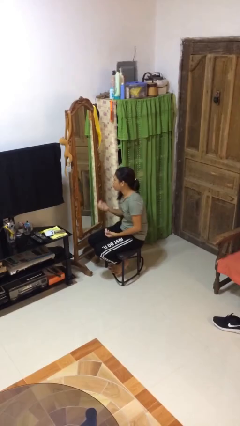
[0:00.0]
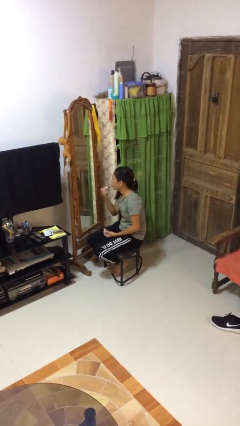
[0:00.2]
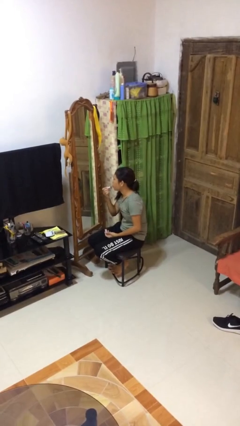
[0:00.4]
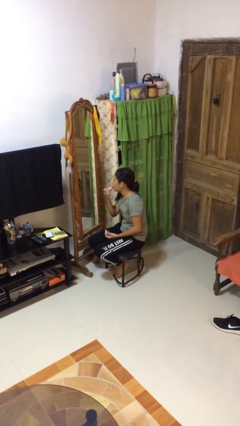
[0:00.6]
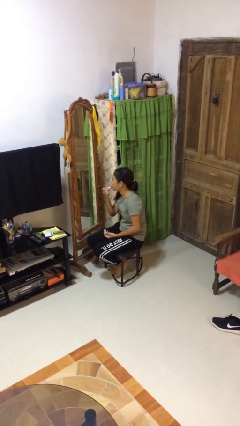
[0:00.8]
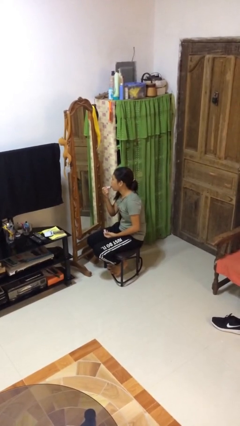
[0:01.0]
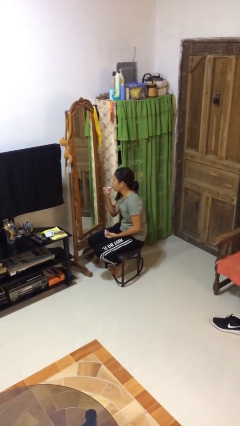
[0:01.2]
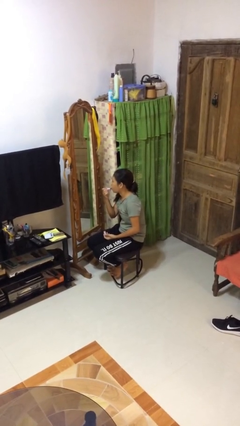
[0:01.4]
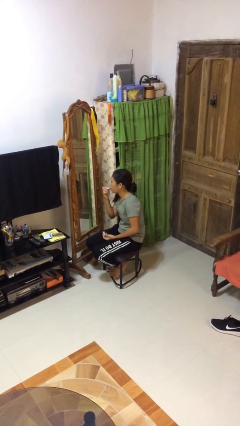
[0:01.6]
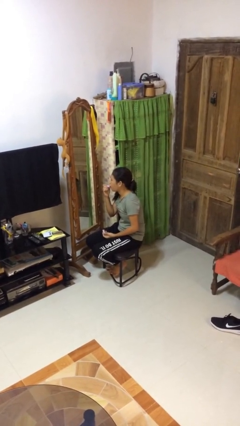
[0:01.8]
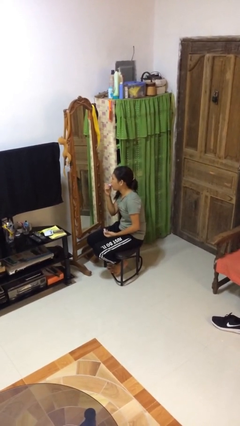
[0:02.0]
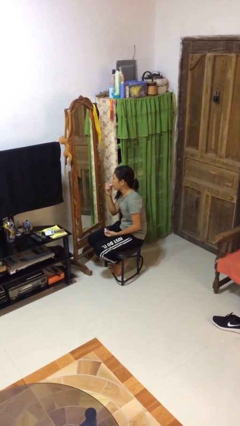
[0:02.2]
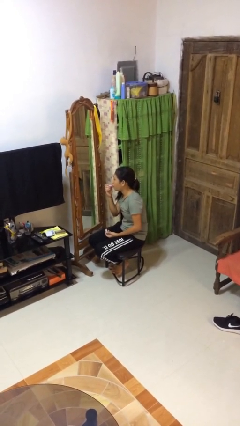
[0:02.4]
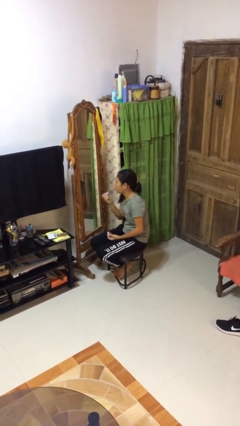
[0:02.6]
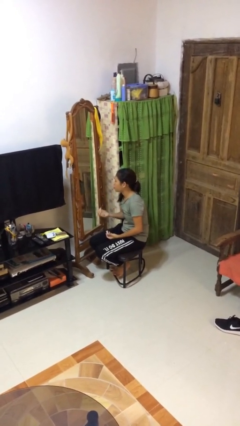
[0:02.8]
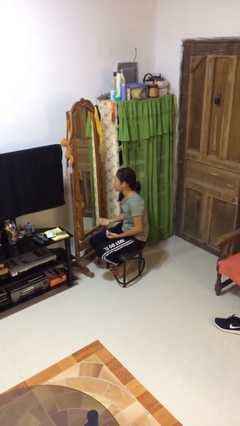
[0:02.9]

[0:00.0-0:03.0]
person applies lip makeup

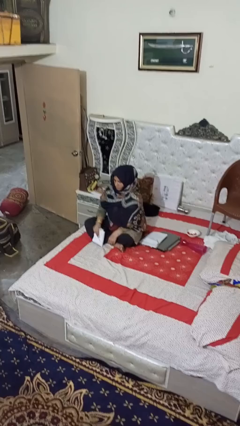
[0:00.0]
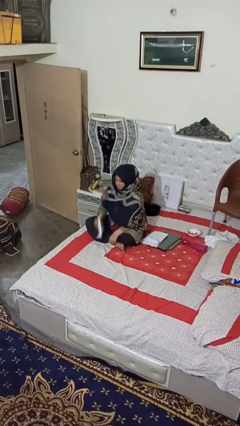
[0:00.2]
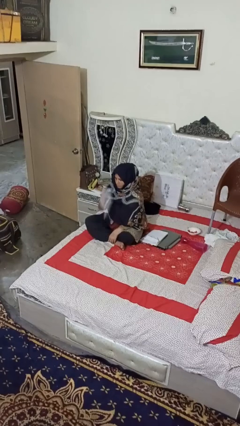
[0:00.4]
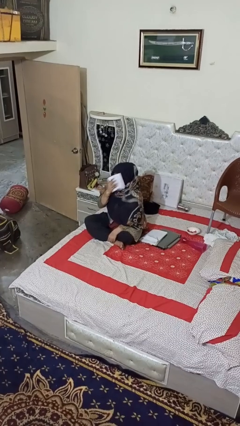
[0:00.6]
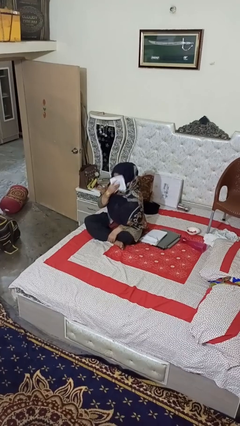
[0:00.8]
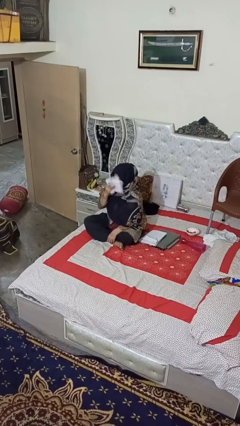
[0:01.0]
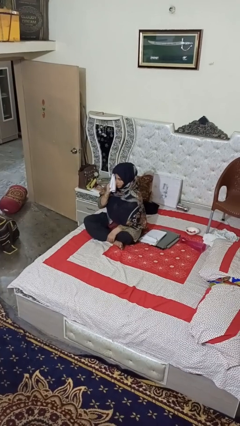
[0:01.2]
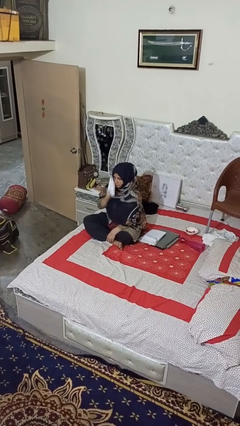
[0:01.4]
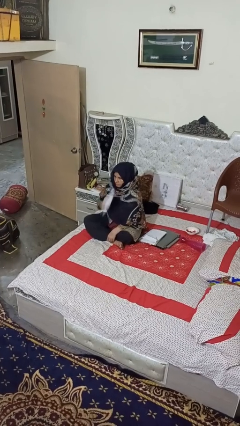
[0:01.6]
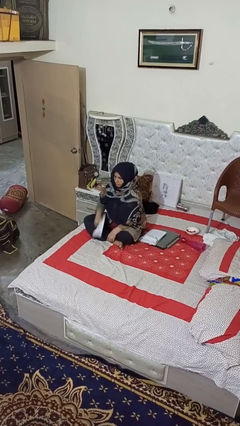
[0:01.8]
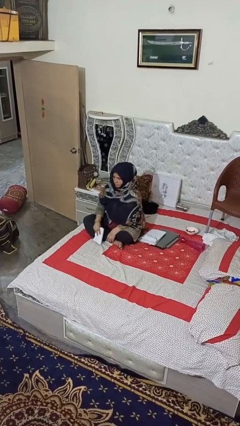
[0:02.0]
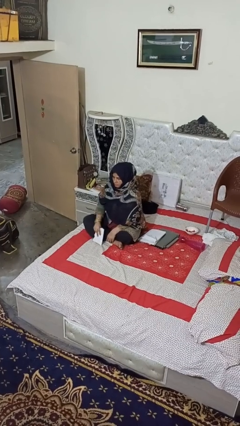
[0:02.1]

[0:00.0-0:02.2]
person wipes mouth with napkin

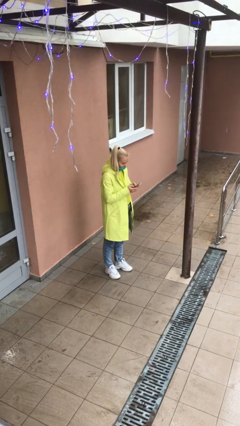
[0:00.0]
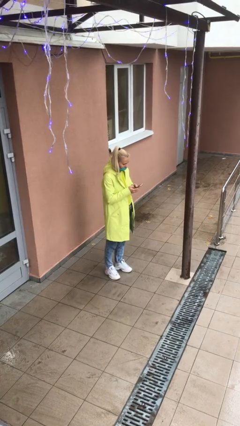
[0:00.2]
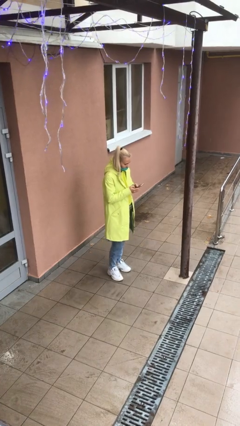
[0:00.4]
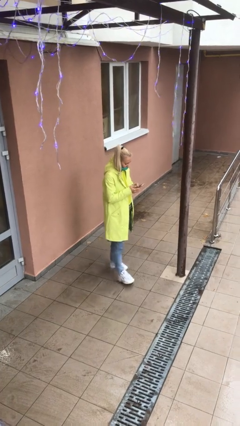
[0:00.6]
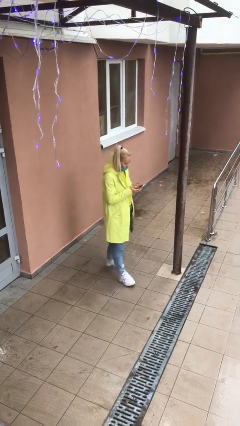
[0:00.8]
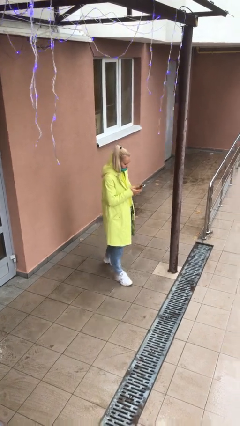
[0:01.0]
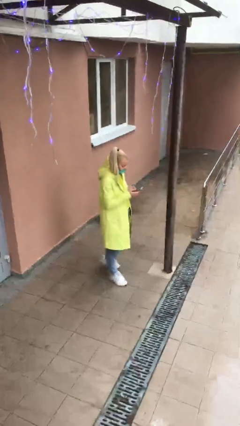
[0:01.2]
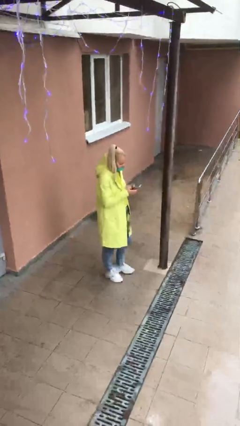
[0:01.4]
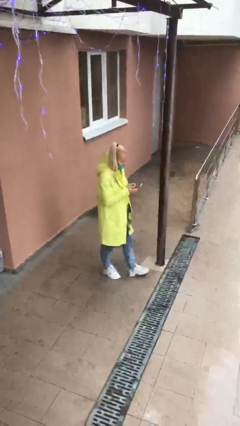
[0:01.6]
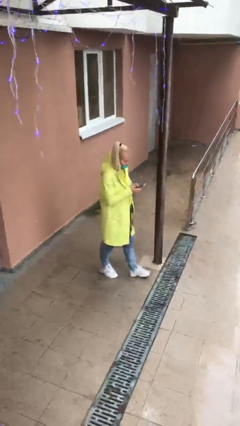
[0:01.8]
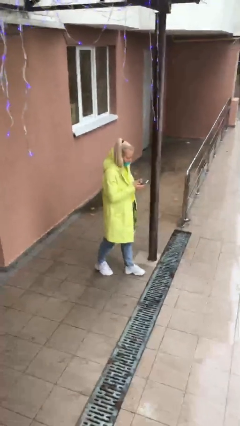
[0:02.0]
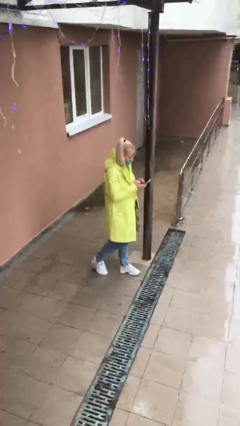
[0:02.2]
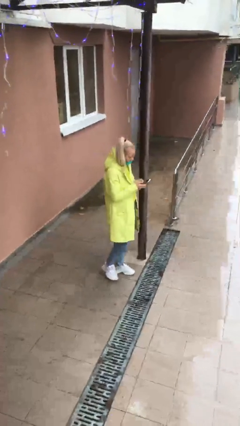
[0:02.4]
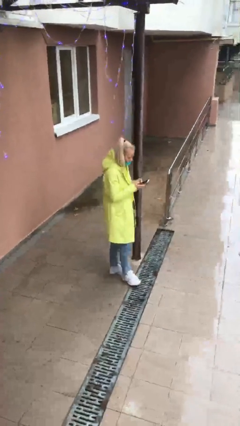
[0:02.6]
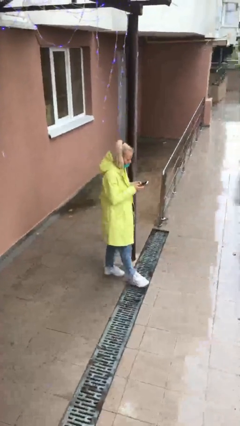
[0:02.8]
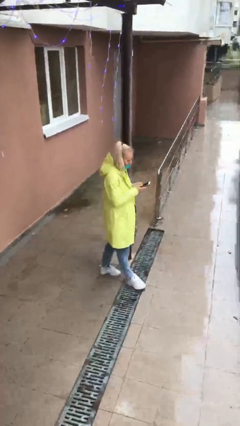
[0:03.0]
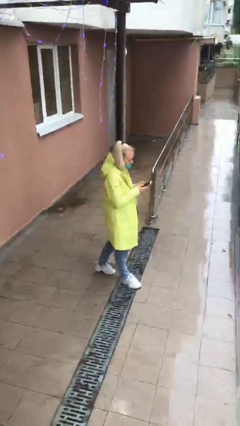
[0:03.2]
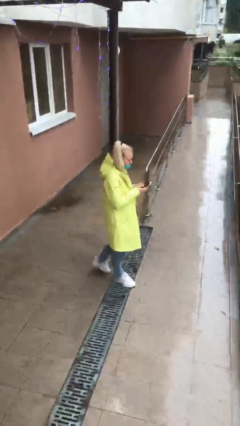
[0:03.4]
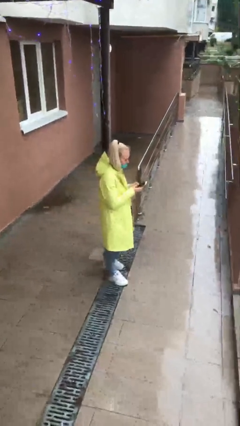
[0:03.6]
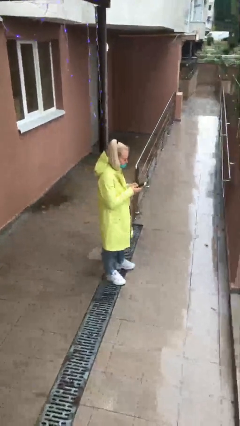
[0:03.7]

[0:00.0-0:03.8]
person texts on phone

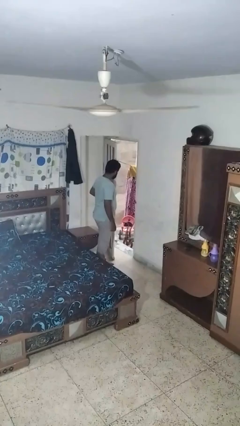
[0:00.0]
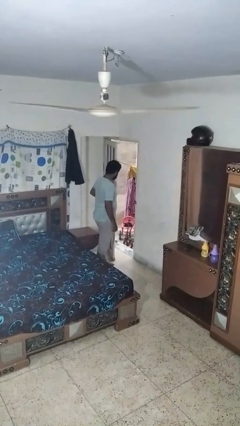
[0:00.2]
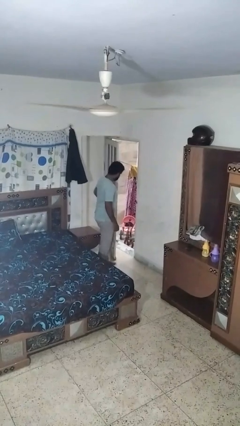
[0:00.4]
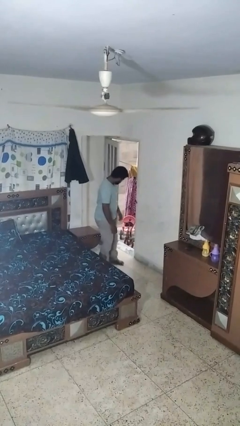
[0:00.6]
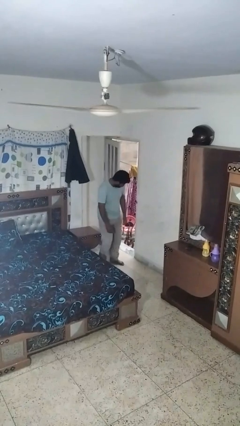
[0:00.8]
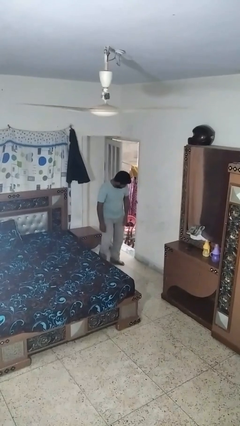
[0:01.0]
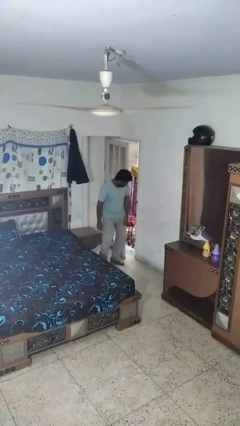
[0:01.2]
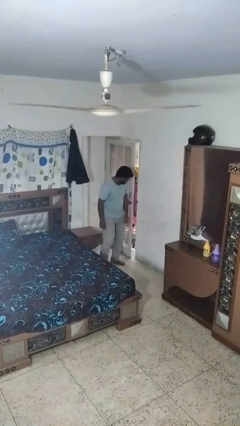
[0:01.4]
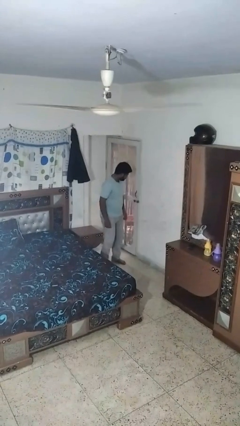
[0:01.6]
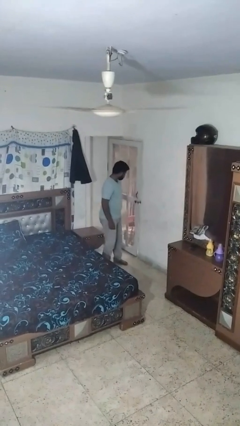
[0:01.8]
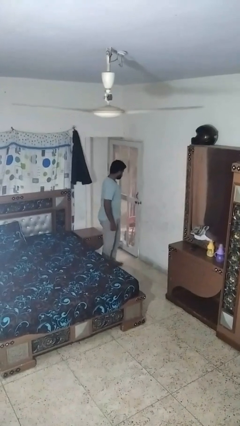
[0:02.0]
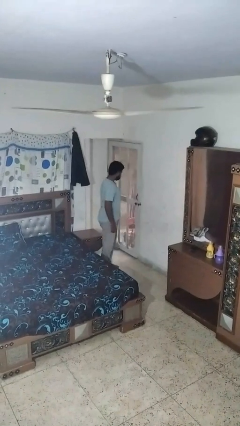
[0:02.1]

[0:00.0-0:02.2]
person closes door with hip

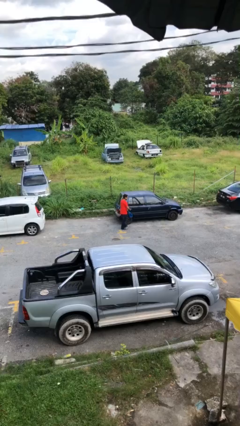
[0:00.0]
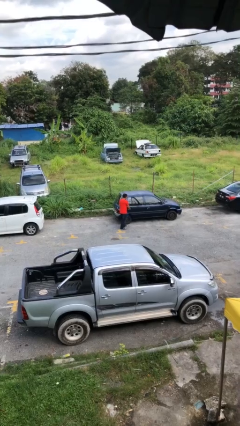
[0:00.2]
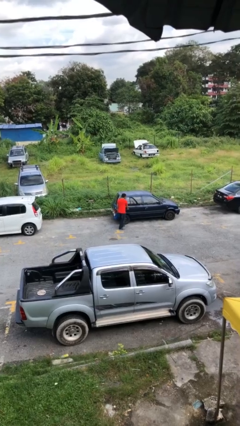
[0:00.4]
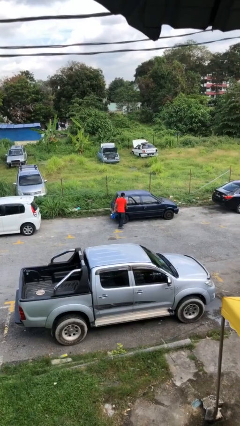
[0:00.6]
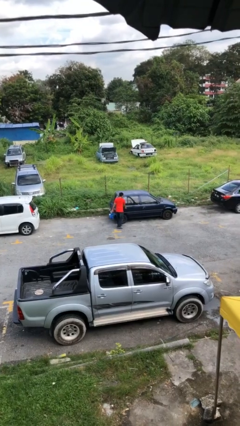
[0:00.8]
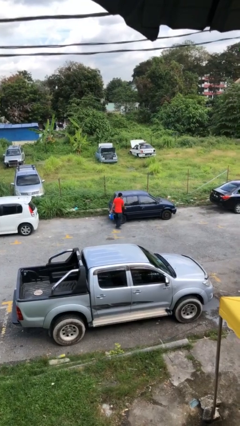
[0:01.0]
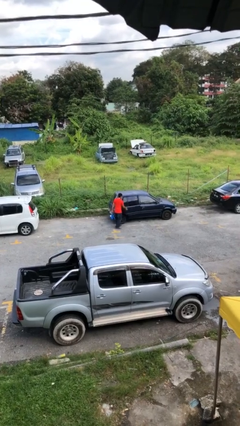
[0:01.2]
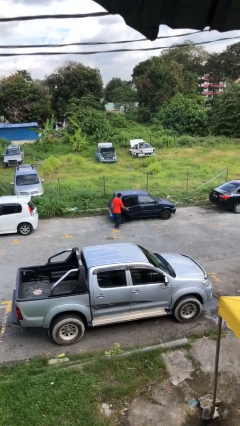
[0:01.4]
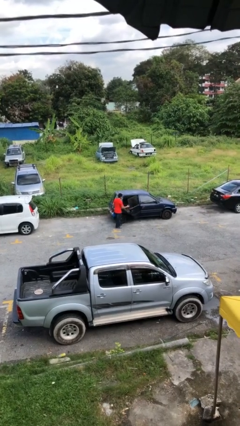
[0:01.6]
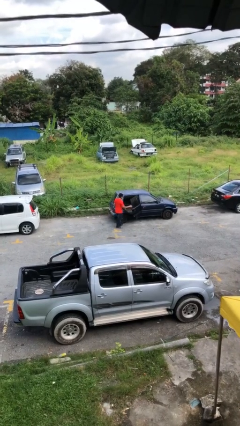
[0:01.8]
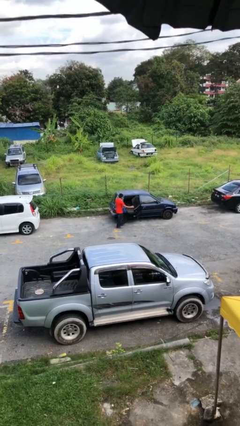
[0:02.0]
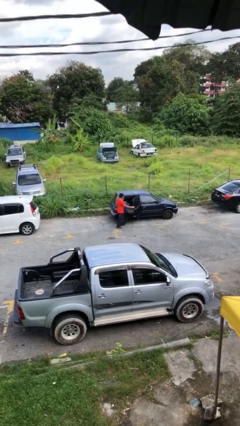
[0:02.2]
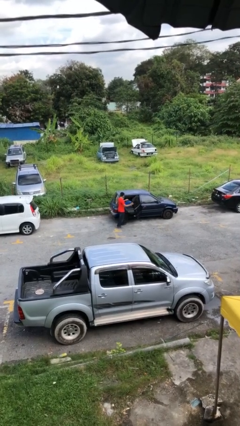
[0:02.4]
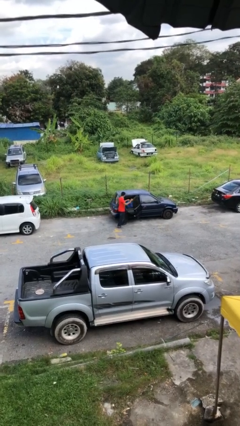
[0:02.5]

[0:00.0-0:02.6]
person opens car door

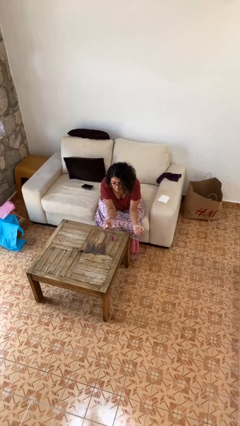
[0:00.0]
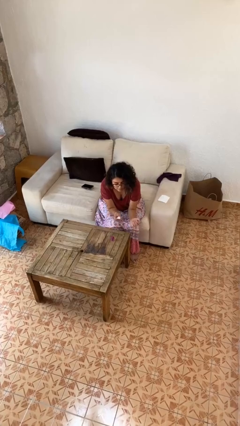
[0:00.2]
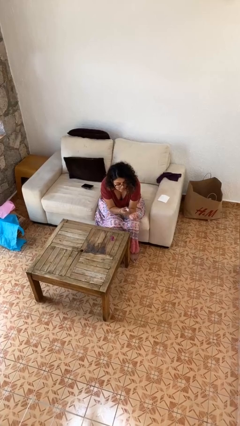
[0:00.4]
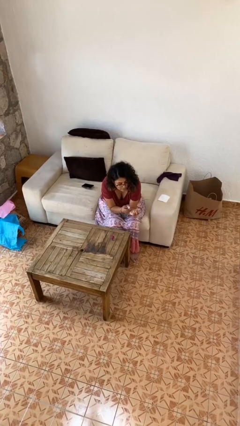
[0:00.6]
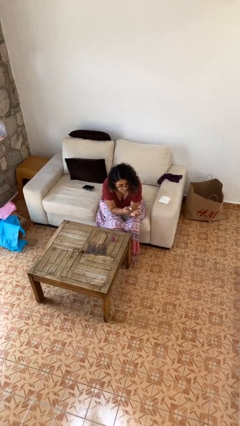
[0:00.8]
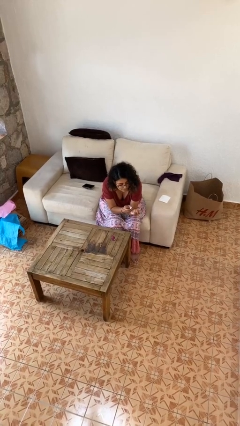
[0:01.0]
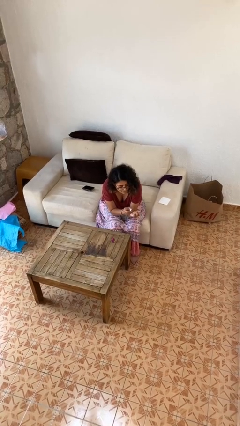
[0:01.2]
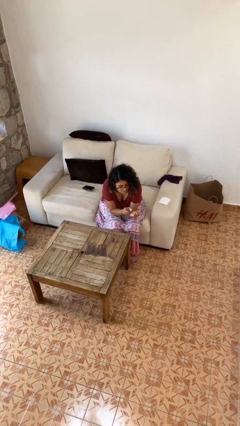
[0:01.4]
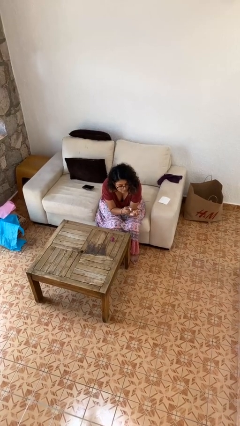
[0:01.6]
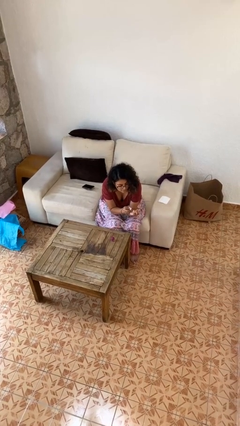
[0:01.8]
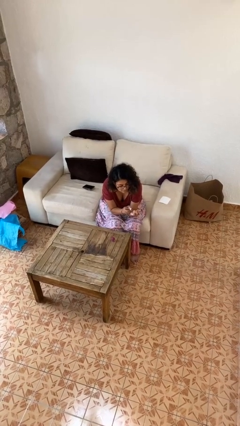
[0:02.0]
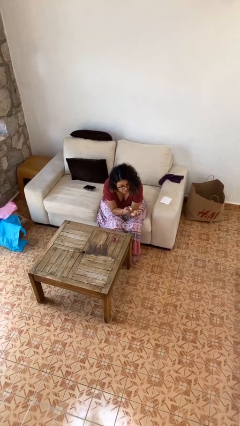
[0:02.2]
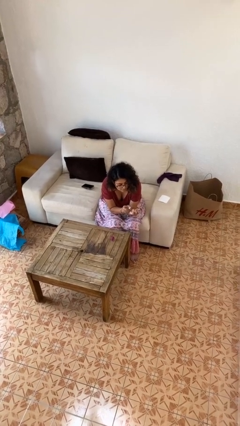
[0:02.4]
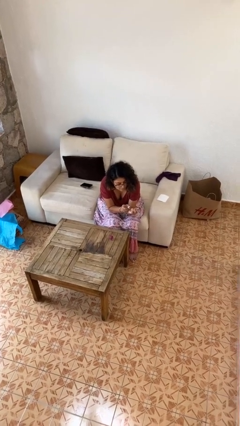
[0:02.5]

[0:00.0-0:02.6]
person paints fingernails

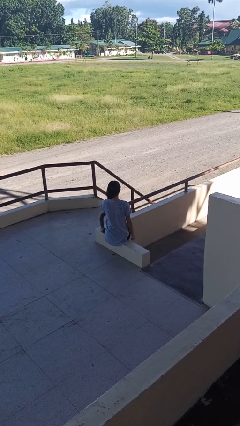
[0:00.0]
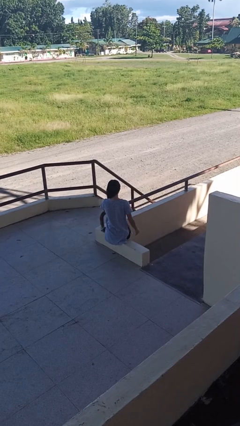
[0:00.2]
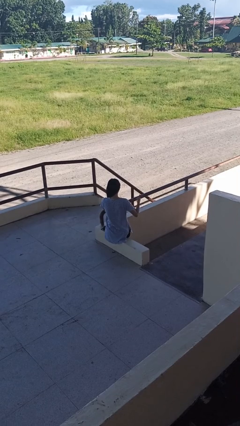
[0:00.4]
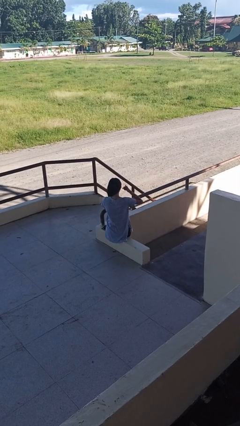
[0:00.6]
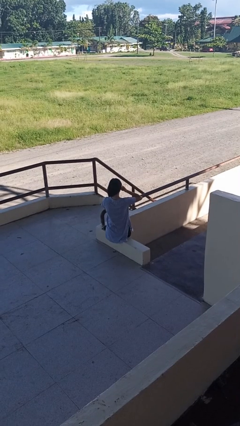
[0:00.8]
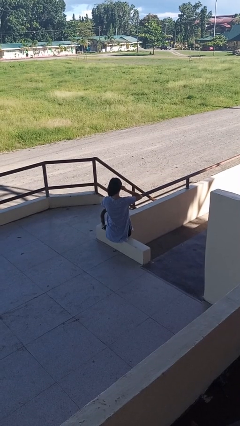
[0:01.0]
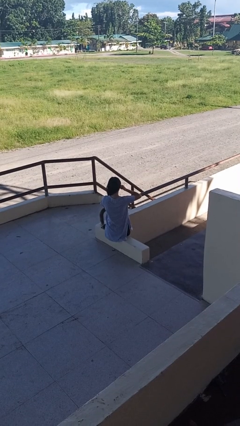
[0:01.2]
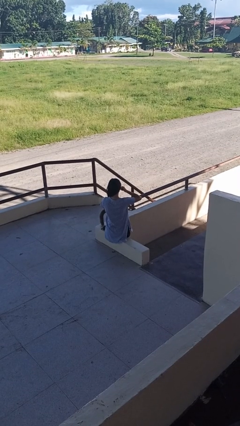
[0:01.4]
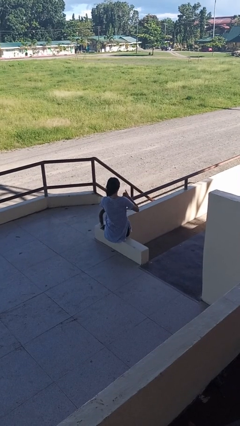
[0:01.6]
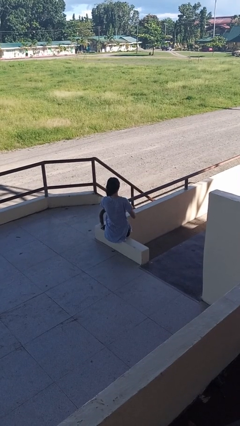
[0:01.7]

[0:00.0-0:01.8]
person gestures call me
